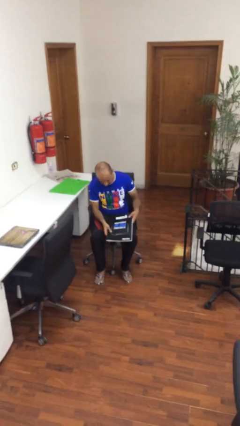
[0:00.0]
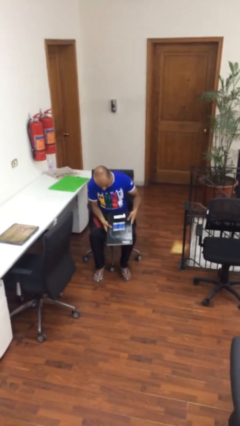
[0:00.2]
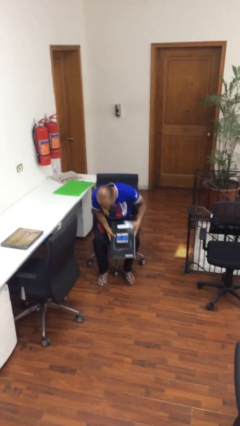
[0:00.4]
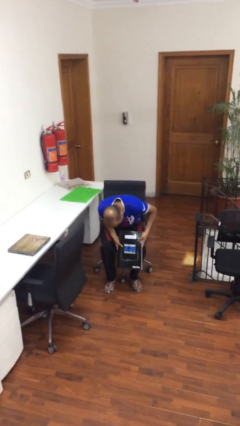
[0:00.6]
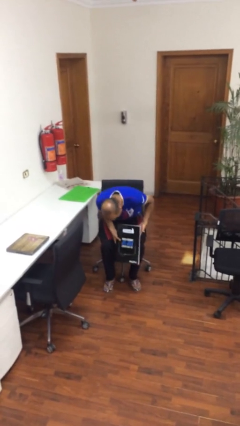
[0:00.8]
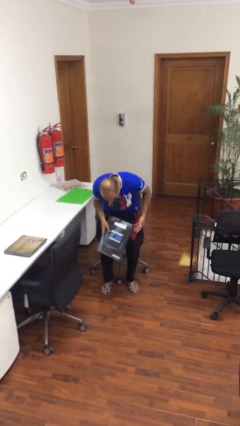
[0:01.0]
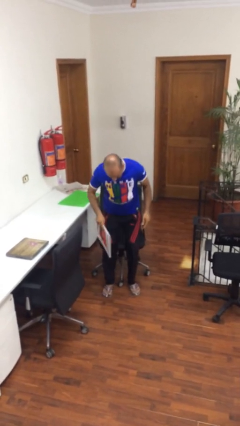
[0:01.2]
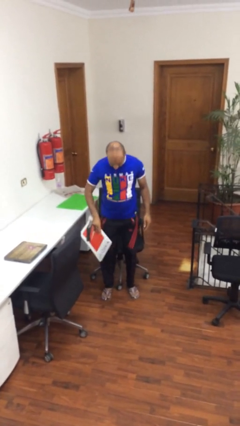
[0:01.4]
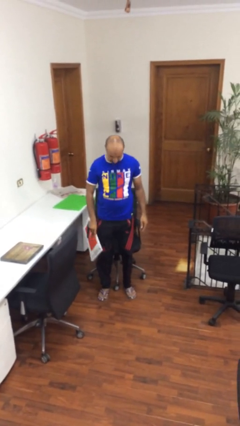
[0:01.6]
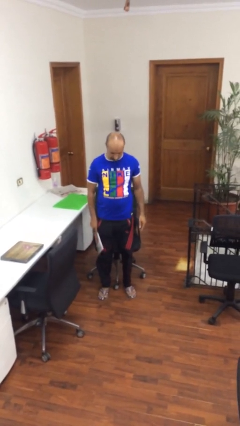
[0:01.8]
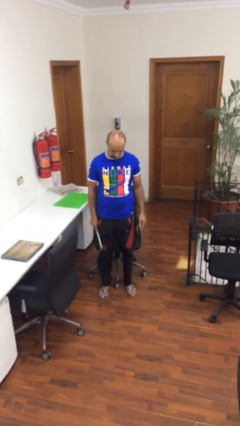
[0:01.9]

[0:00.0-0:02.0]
person stands up

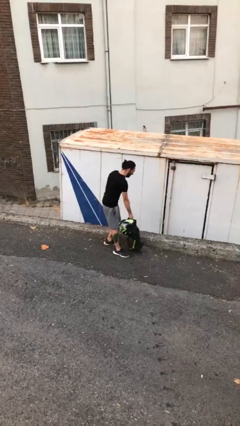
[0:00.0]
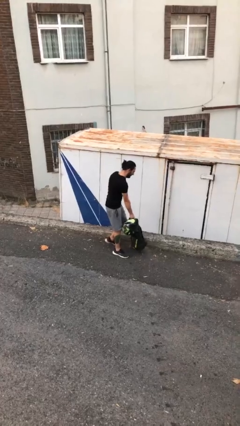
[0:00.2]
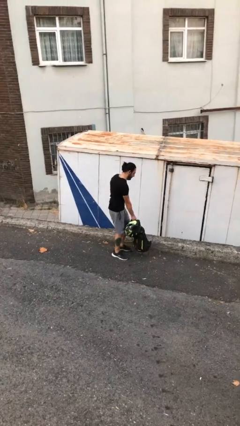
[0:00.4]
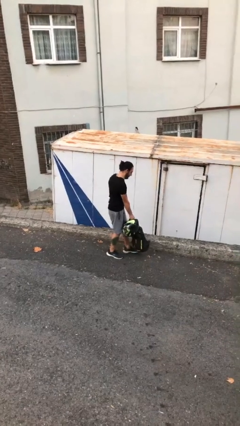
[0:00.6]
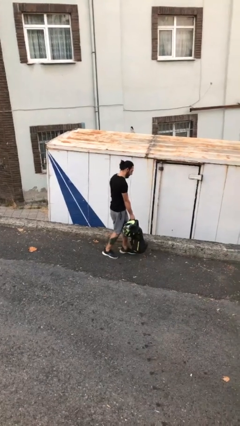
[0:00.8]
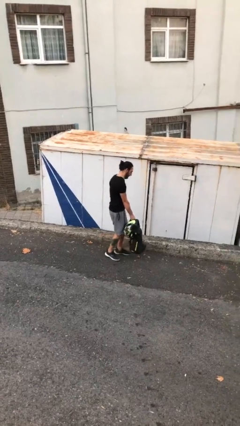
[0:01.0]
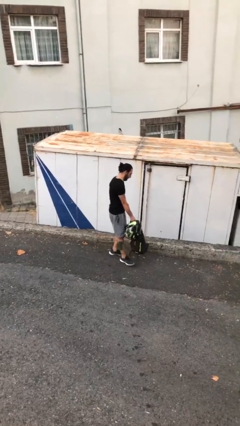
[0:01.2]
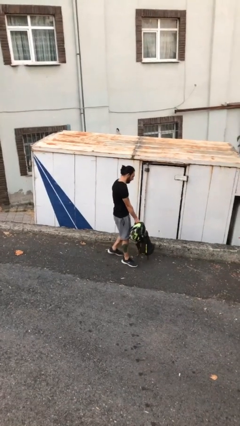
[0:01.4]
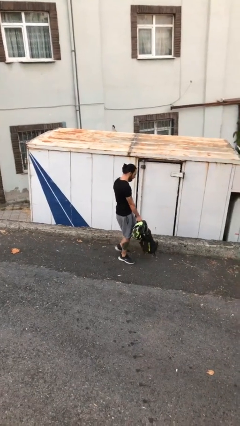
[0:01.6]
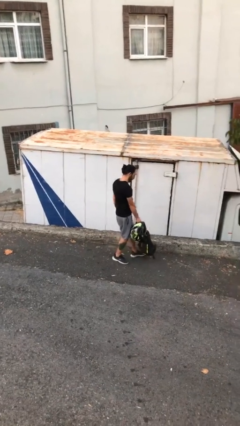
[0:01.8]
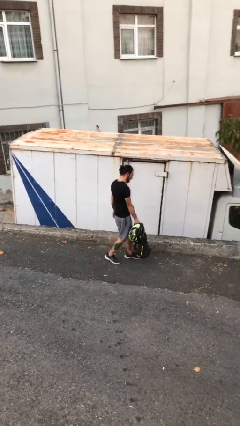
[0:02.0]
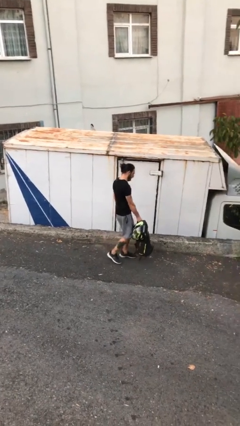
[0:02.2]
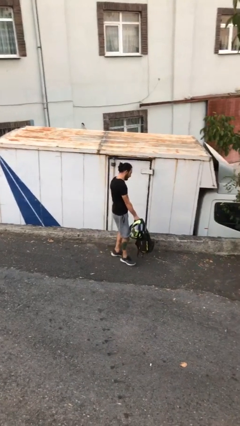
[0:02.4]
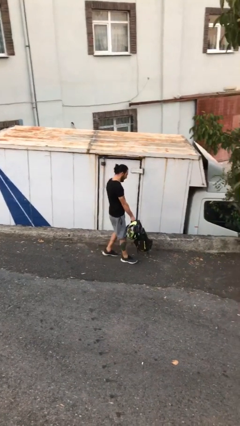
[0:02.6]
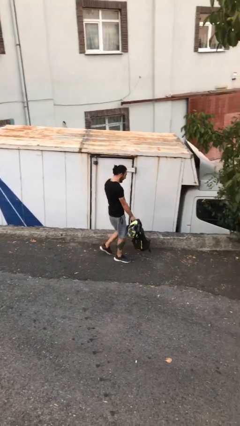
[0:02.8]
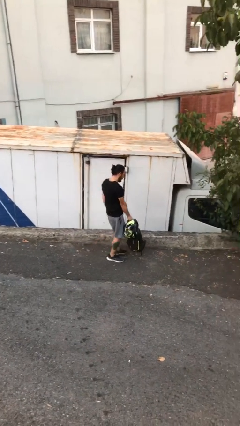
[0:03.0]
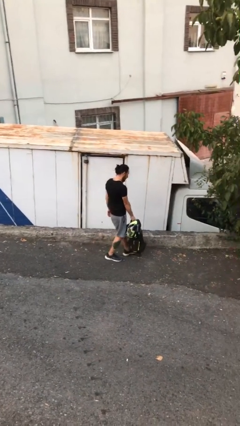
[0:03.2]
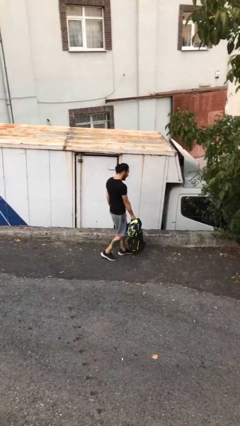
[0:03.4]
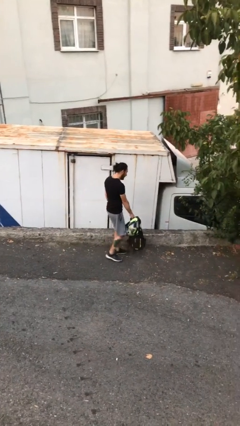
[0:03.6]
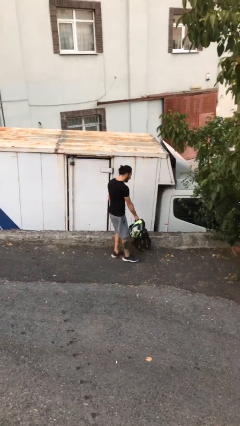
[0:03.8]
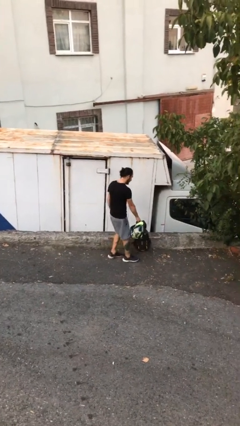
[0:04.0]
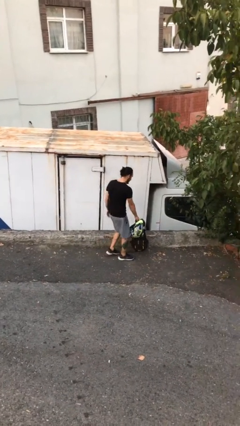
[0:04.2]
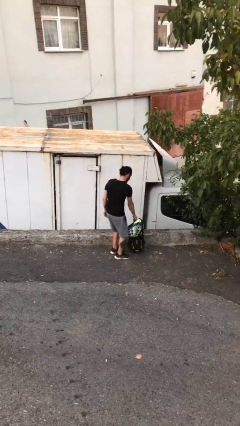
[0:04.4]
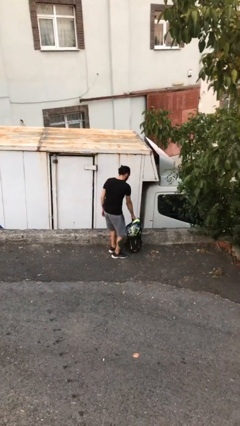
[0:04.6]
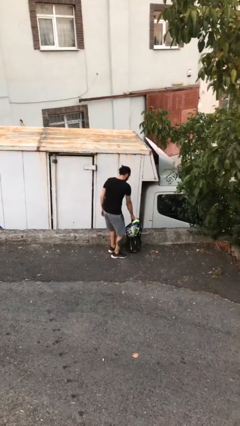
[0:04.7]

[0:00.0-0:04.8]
person carries heavy object

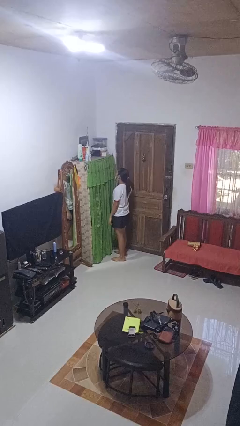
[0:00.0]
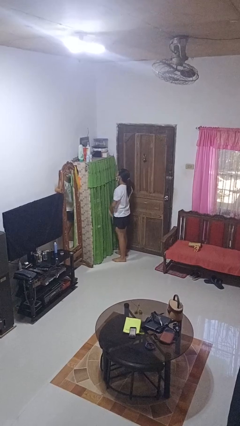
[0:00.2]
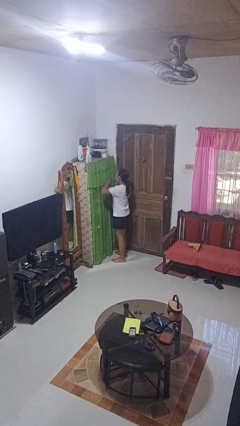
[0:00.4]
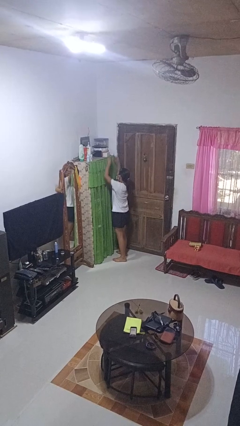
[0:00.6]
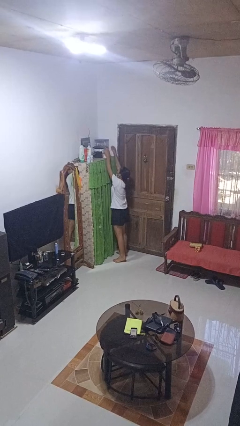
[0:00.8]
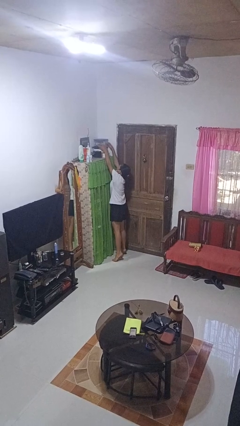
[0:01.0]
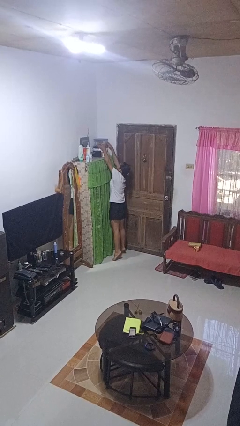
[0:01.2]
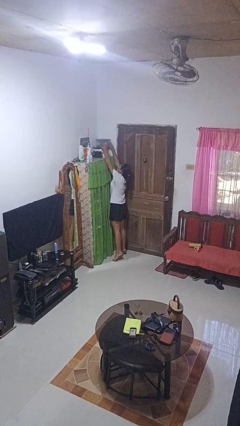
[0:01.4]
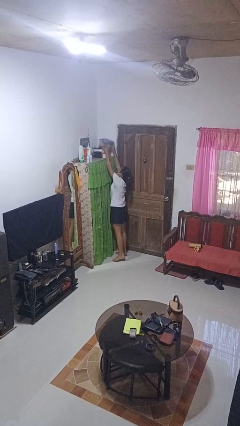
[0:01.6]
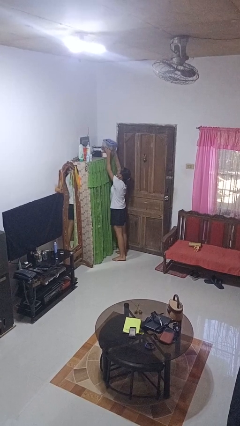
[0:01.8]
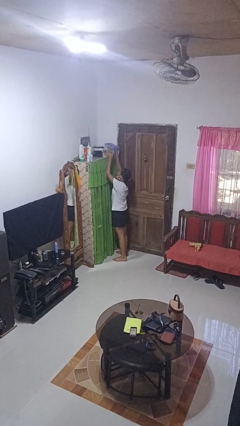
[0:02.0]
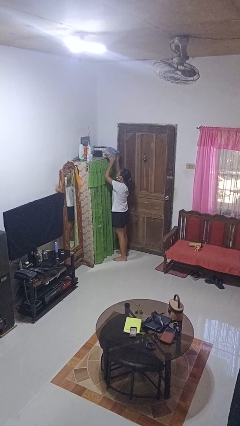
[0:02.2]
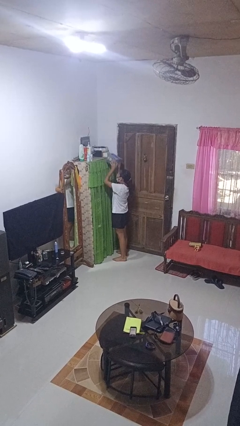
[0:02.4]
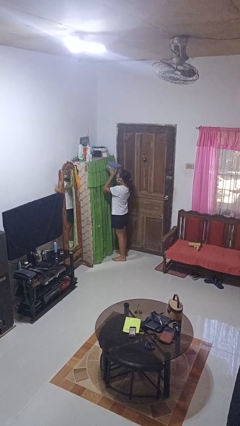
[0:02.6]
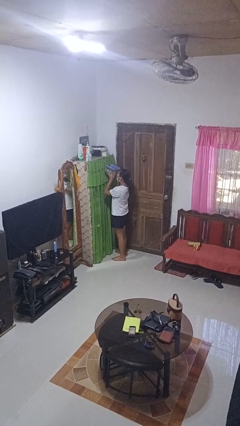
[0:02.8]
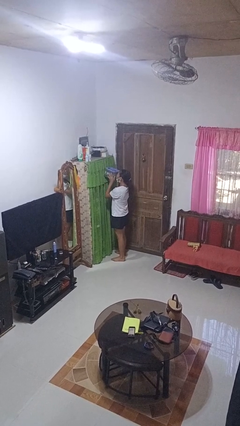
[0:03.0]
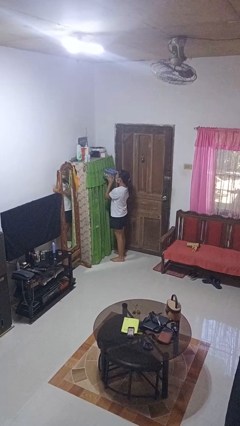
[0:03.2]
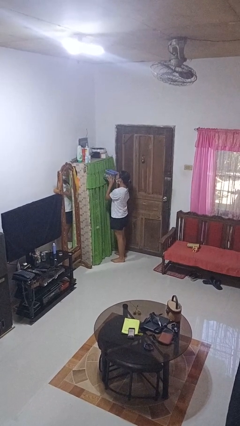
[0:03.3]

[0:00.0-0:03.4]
person picks up object from shelf

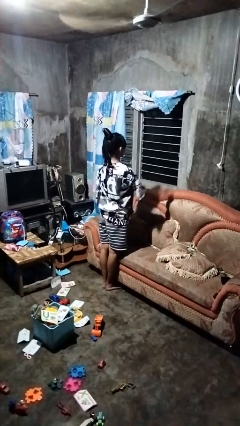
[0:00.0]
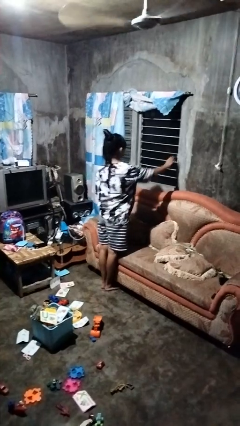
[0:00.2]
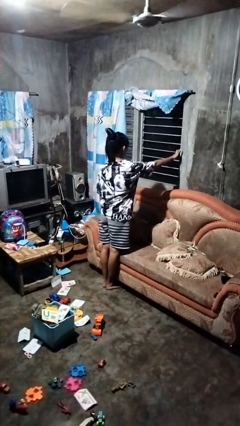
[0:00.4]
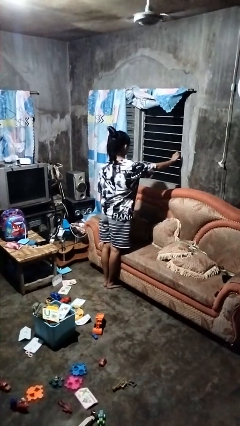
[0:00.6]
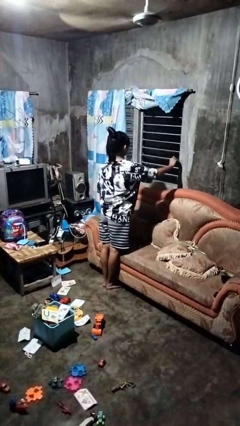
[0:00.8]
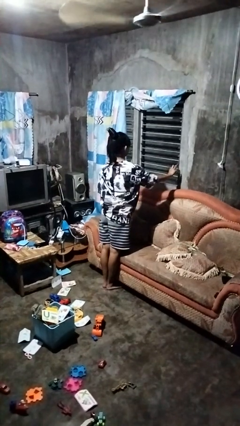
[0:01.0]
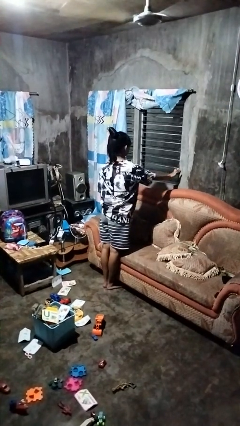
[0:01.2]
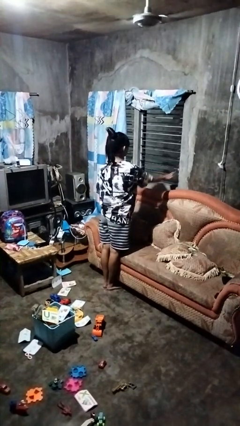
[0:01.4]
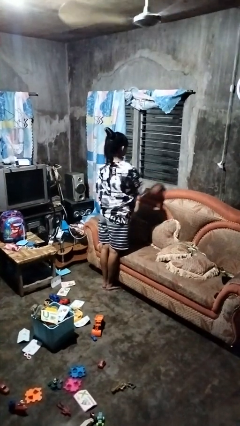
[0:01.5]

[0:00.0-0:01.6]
person opens home window

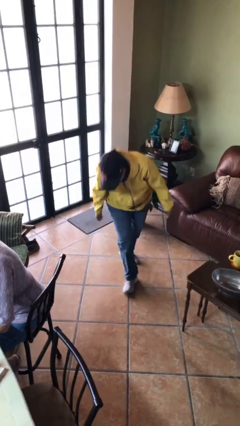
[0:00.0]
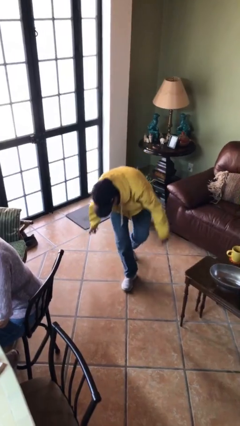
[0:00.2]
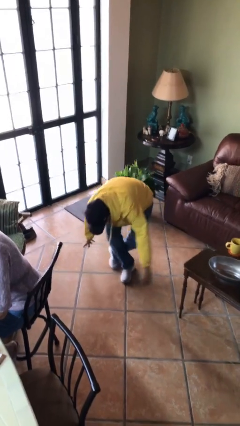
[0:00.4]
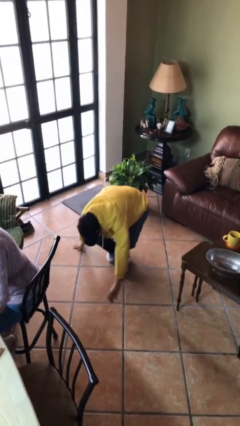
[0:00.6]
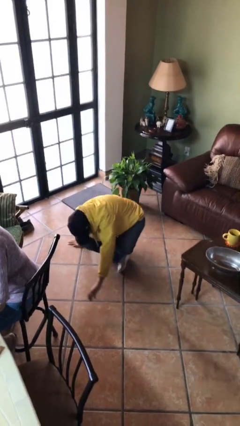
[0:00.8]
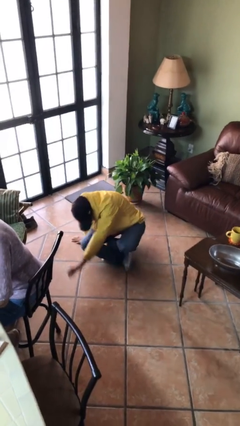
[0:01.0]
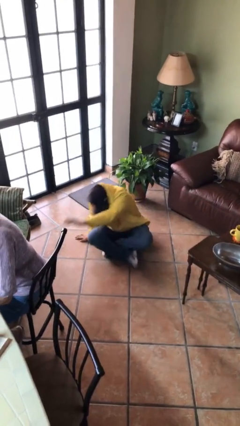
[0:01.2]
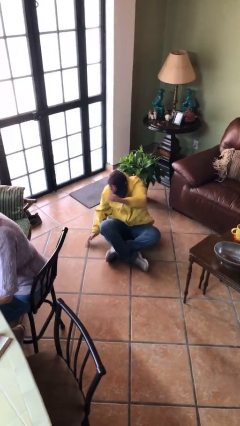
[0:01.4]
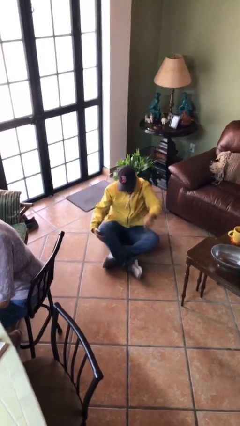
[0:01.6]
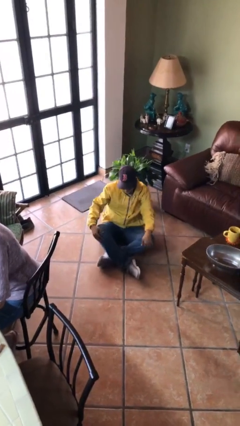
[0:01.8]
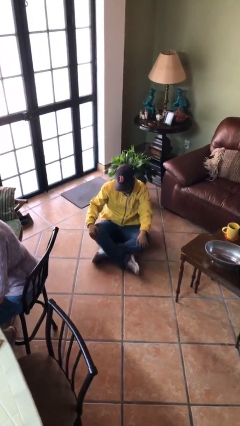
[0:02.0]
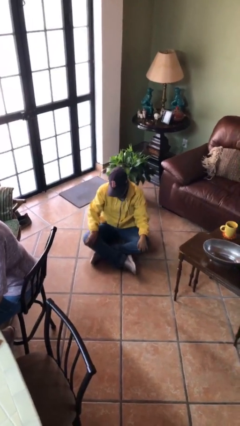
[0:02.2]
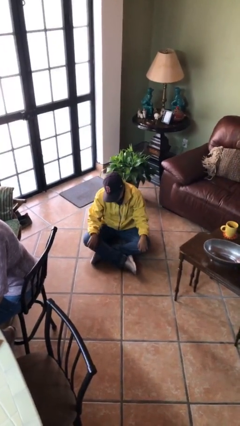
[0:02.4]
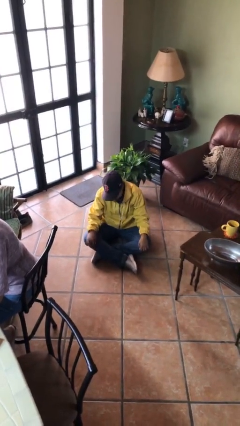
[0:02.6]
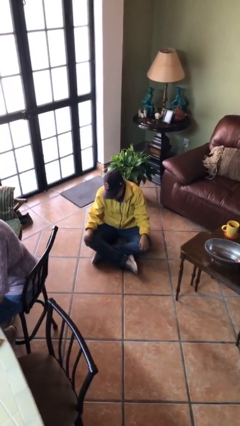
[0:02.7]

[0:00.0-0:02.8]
person sits crisscross

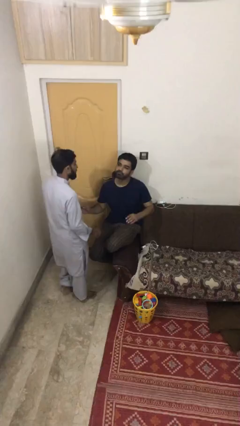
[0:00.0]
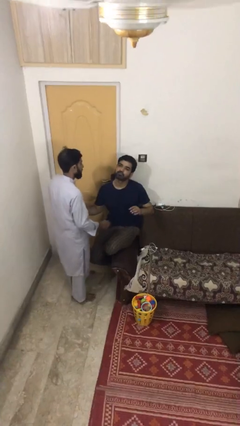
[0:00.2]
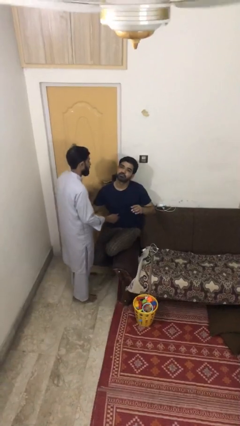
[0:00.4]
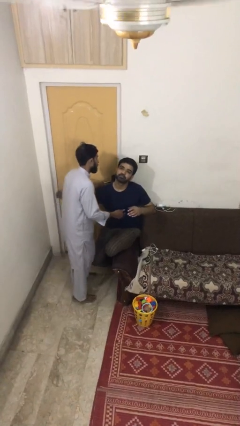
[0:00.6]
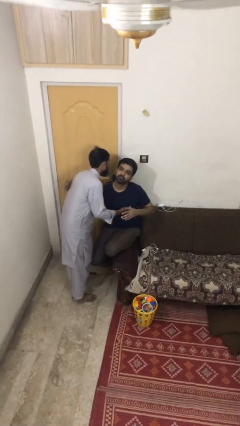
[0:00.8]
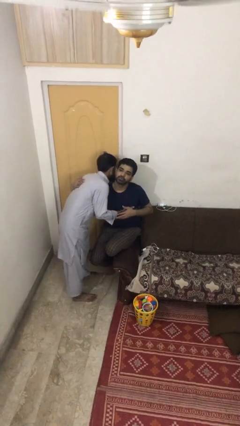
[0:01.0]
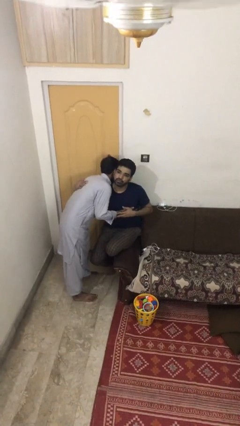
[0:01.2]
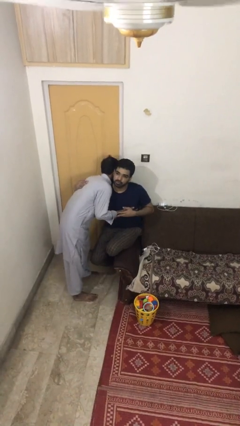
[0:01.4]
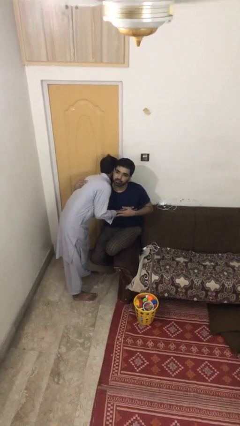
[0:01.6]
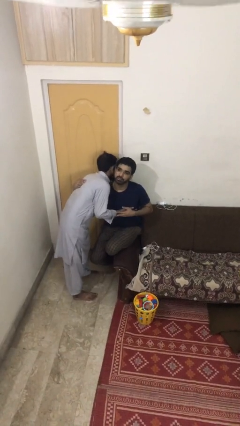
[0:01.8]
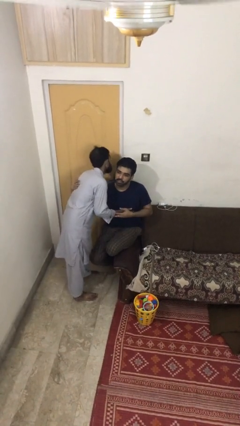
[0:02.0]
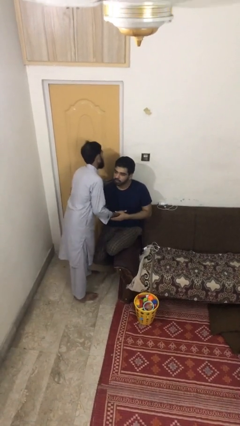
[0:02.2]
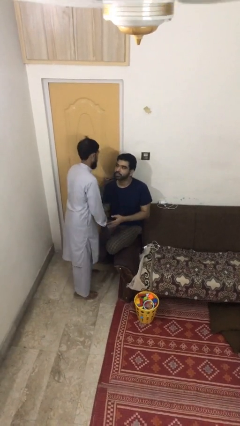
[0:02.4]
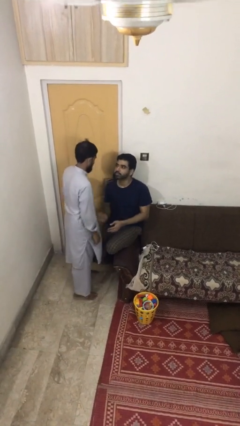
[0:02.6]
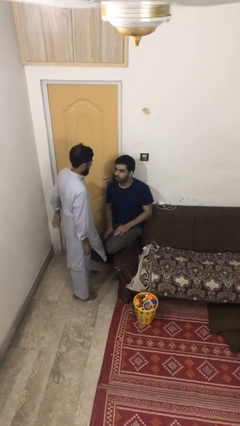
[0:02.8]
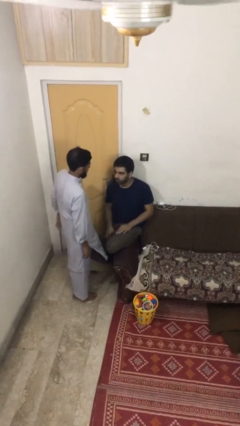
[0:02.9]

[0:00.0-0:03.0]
person embraces person
